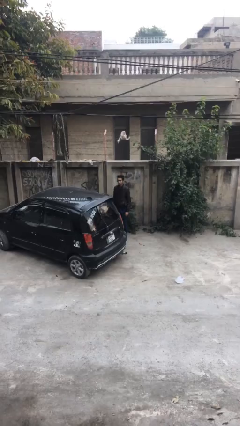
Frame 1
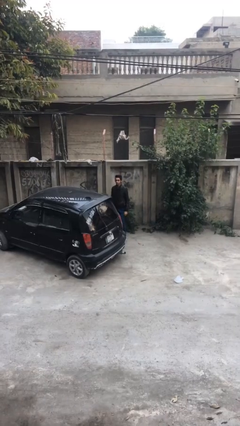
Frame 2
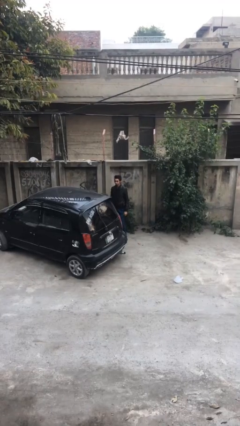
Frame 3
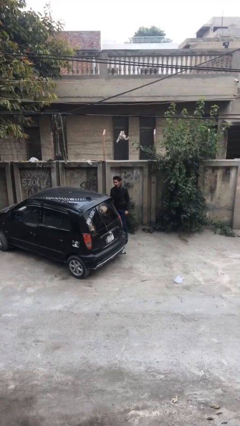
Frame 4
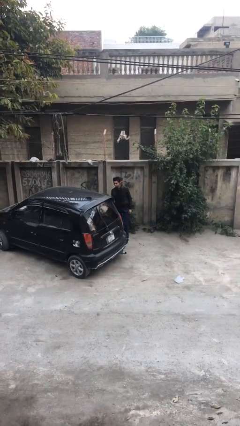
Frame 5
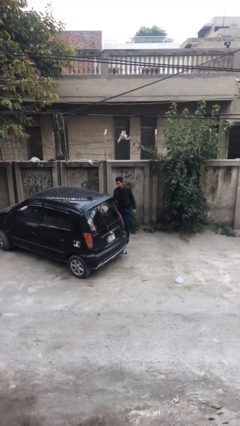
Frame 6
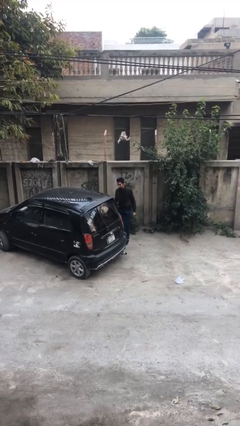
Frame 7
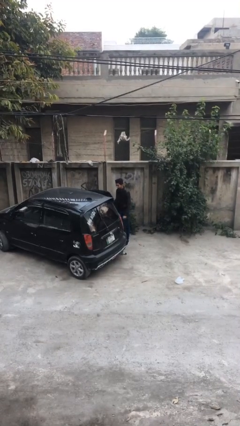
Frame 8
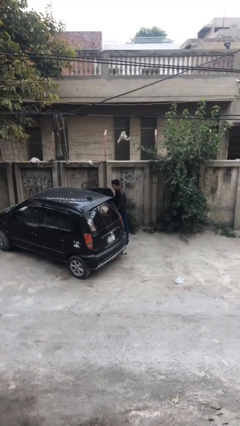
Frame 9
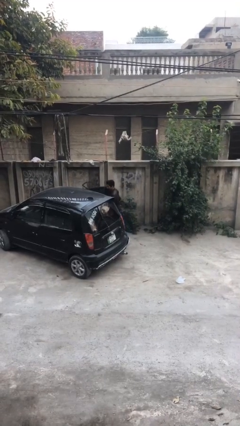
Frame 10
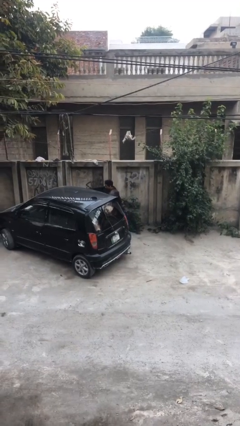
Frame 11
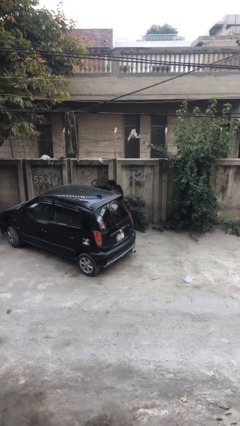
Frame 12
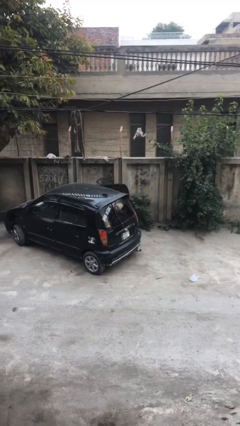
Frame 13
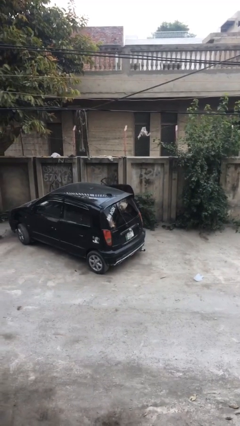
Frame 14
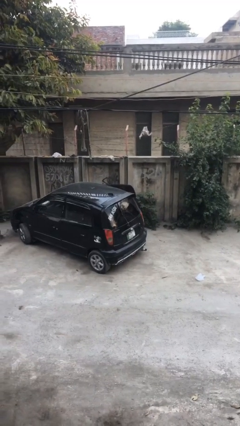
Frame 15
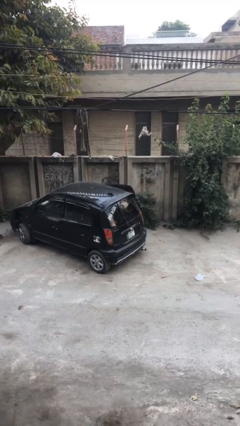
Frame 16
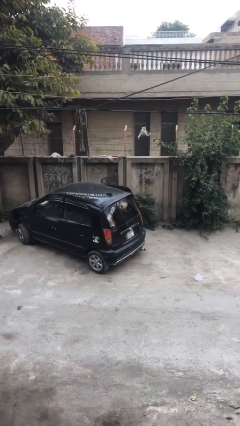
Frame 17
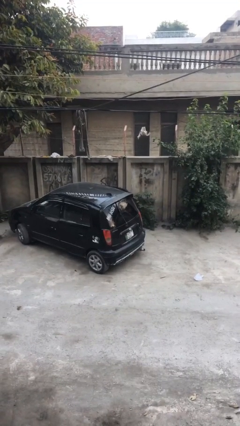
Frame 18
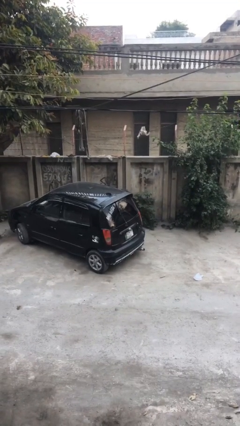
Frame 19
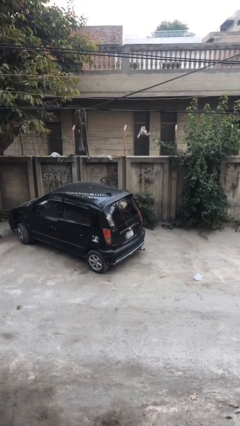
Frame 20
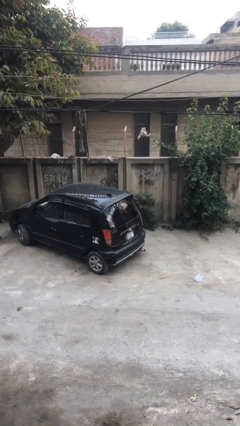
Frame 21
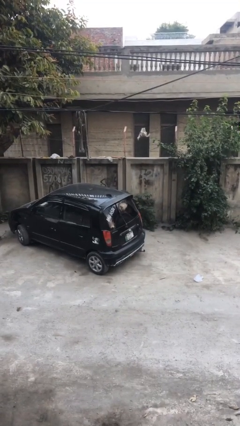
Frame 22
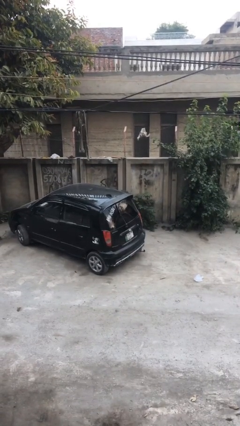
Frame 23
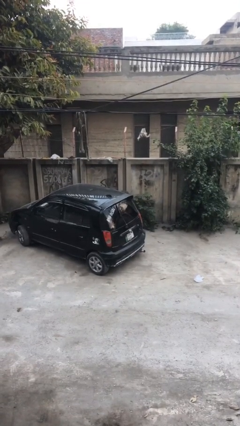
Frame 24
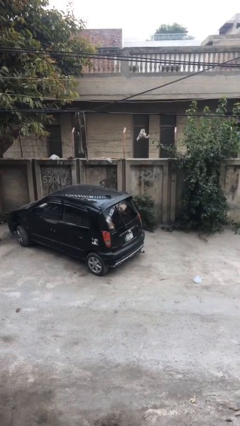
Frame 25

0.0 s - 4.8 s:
person enters car

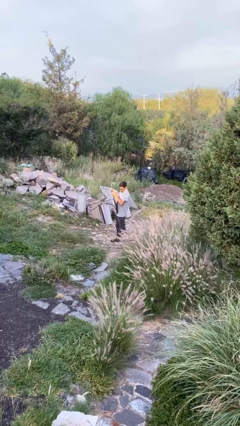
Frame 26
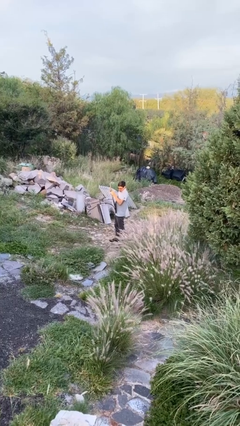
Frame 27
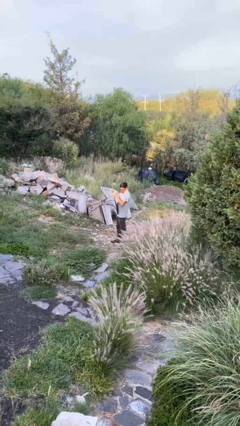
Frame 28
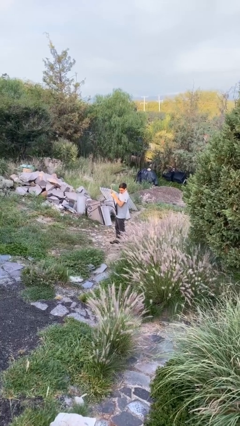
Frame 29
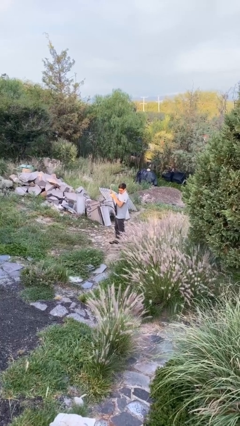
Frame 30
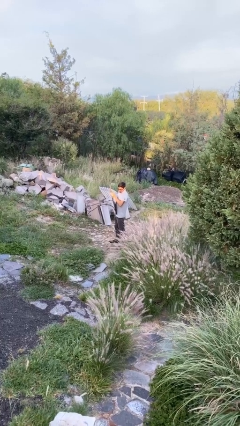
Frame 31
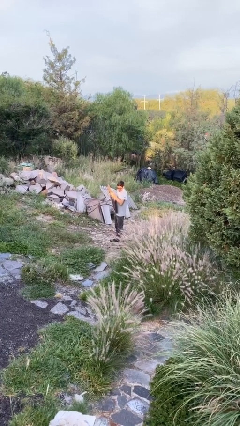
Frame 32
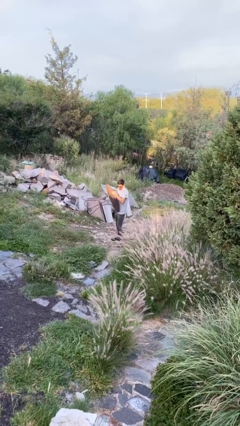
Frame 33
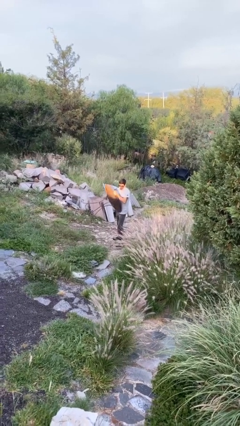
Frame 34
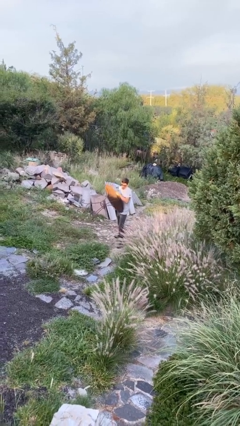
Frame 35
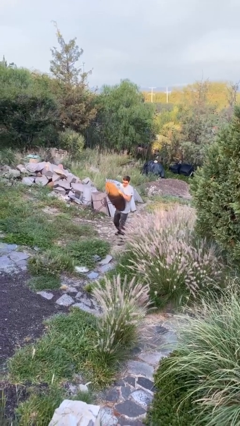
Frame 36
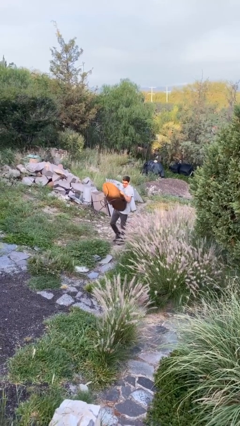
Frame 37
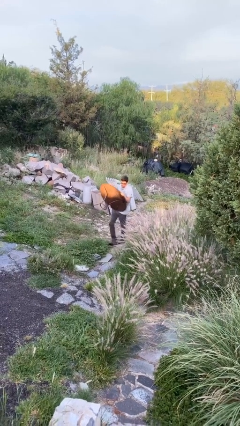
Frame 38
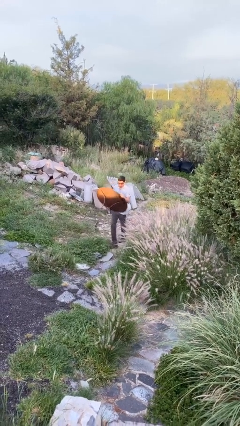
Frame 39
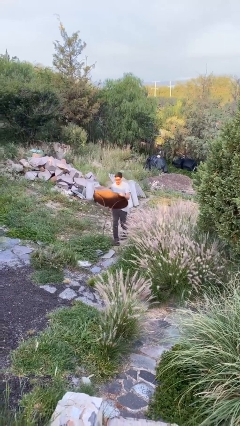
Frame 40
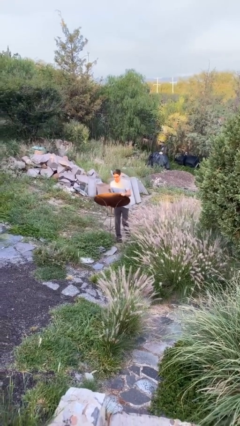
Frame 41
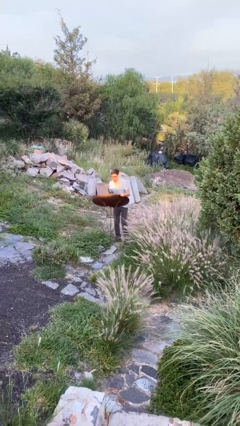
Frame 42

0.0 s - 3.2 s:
person carries heavy object

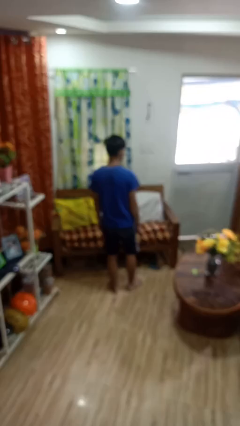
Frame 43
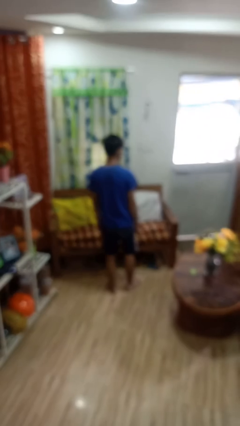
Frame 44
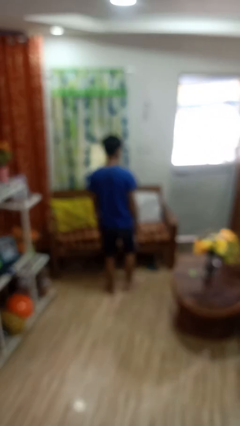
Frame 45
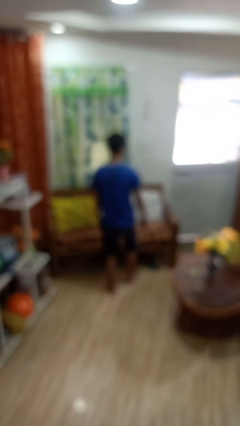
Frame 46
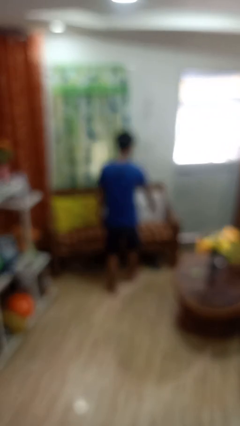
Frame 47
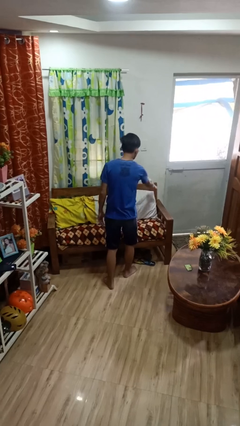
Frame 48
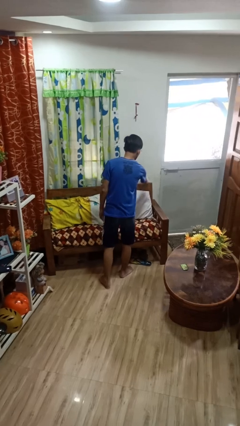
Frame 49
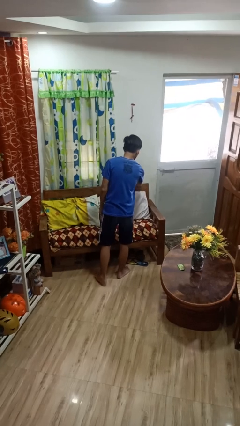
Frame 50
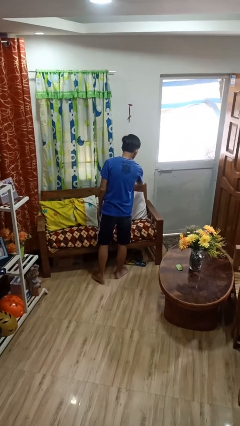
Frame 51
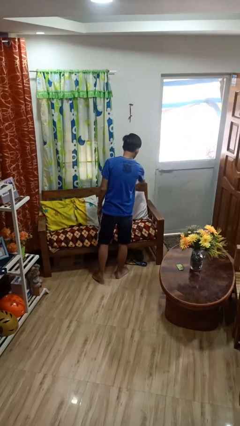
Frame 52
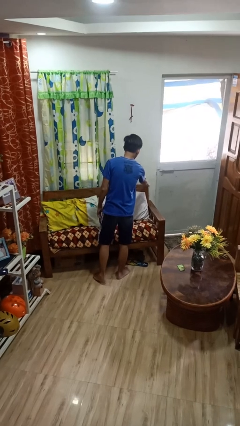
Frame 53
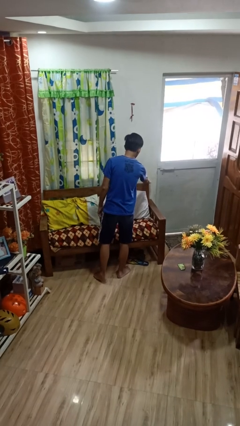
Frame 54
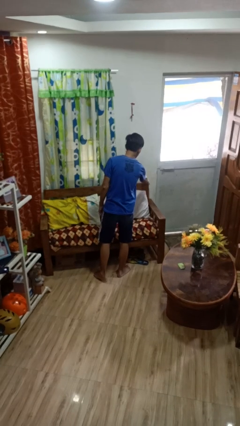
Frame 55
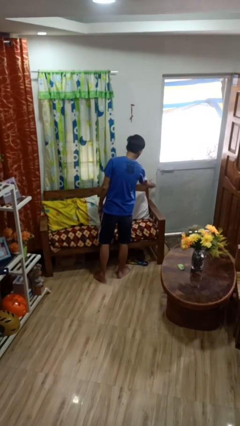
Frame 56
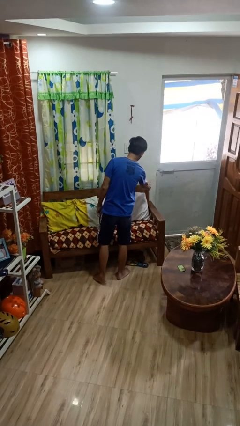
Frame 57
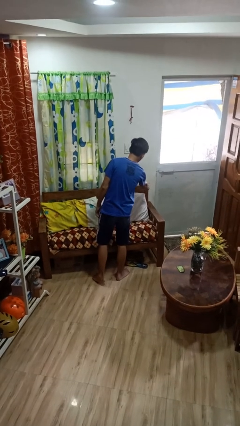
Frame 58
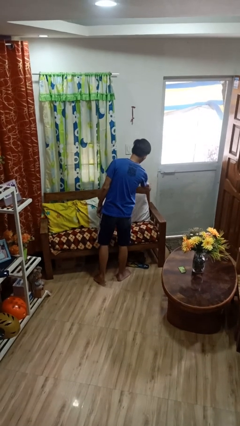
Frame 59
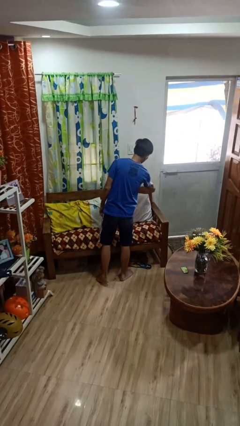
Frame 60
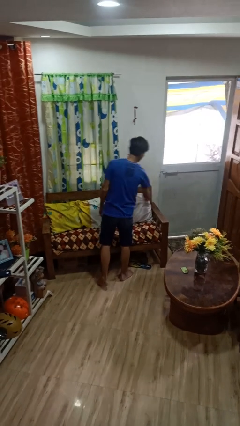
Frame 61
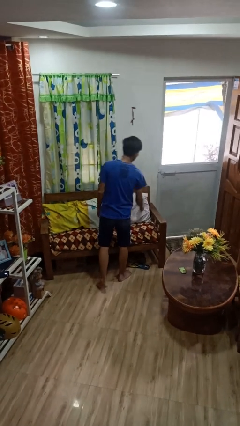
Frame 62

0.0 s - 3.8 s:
person taps object with finger

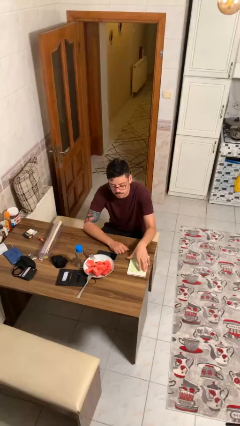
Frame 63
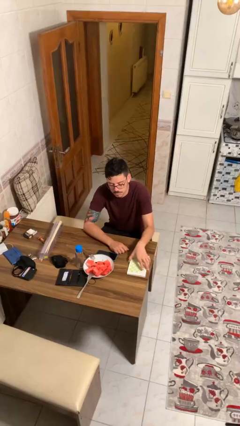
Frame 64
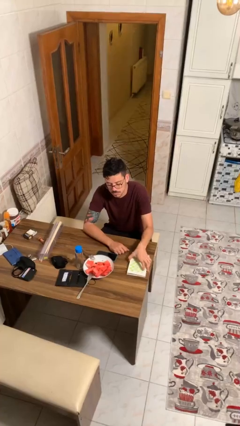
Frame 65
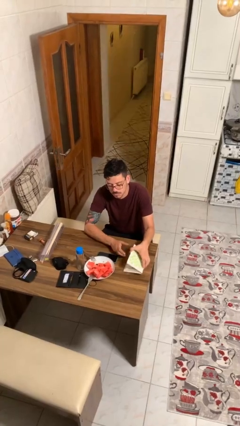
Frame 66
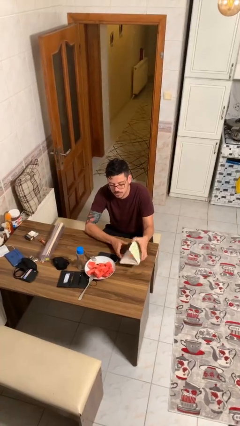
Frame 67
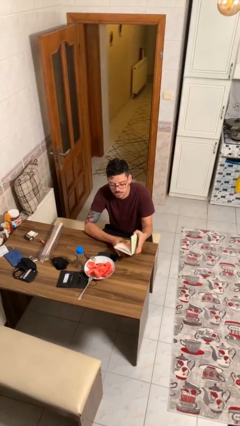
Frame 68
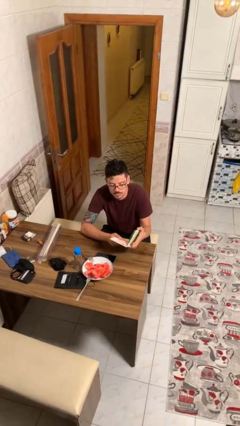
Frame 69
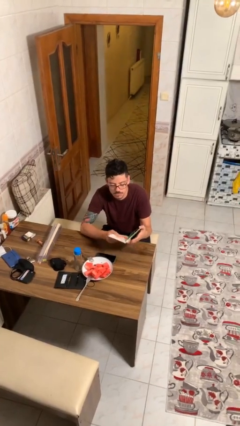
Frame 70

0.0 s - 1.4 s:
person picks up object from table

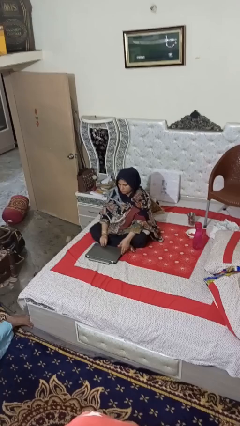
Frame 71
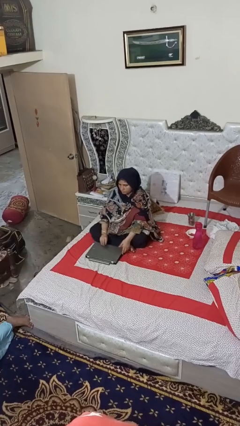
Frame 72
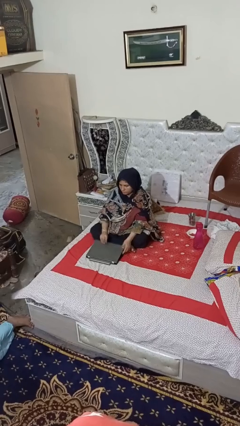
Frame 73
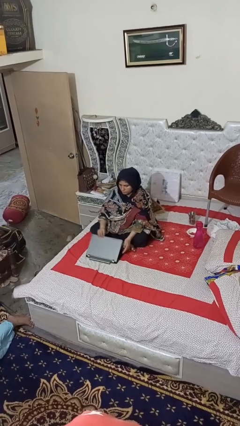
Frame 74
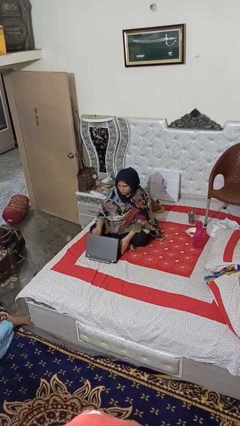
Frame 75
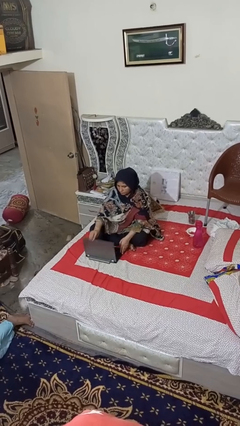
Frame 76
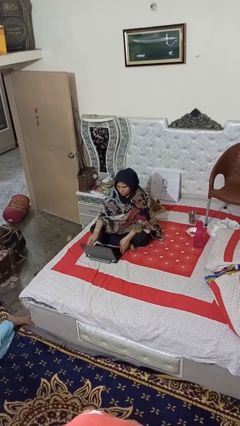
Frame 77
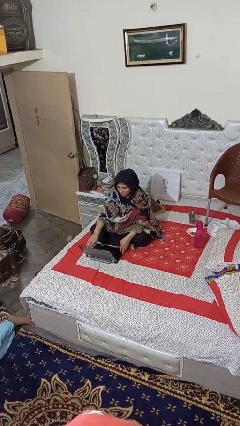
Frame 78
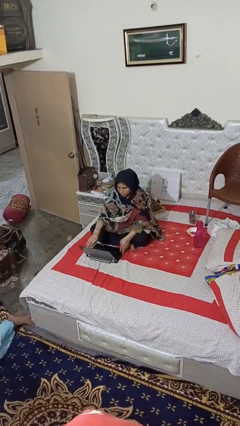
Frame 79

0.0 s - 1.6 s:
person opens laptop

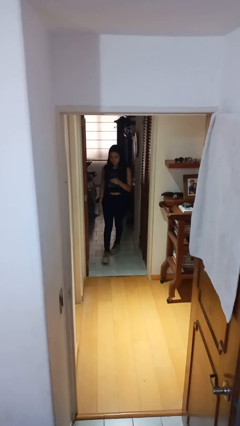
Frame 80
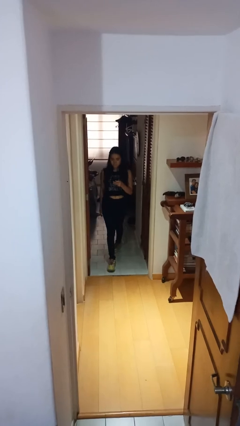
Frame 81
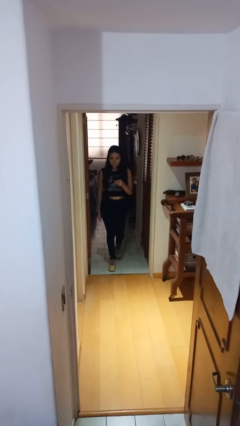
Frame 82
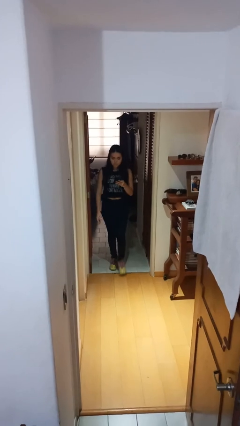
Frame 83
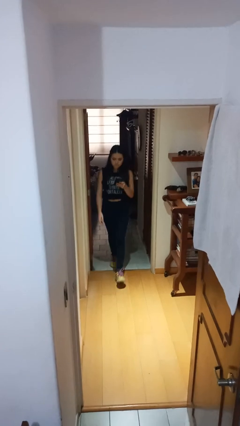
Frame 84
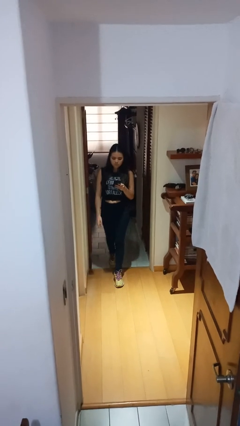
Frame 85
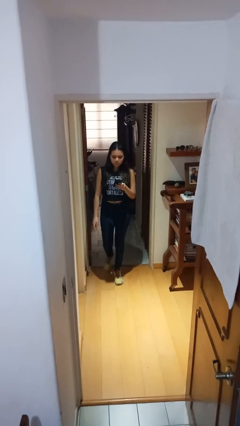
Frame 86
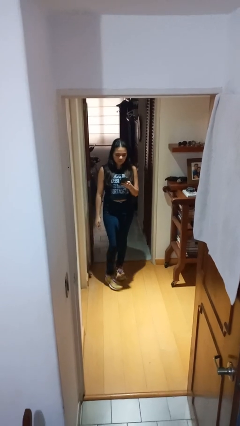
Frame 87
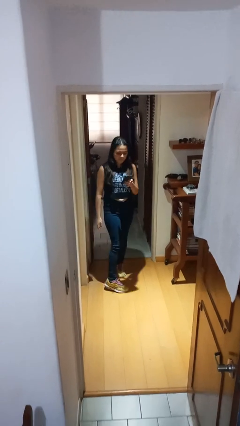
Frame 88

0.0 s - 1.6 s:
person enters scene through structure

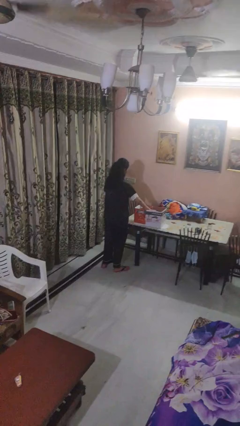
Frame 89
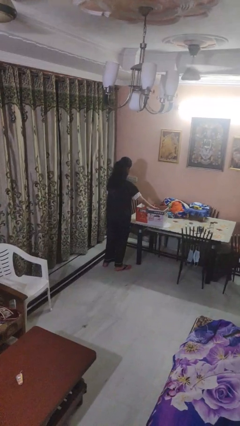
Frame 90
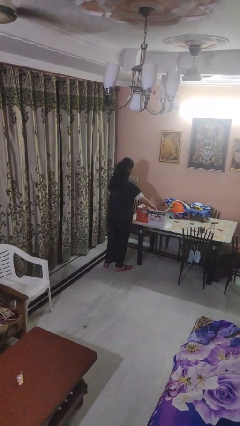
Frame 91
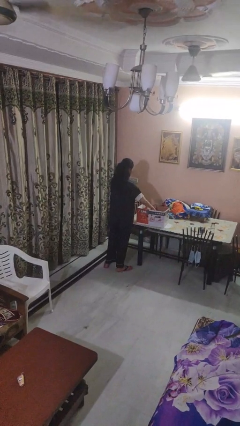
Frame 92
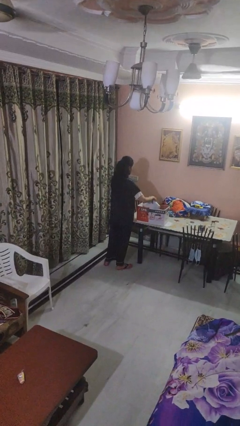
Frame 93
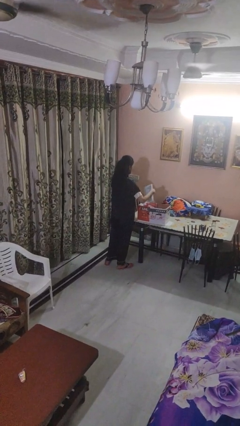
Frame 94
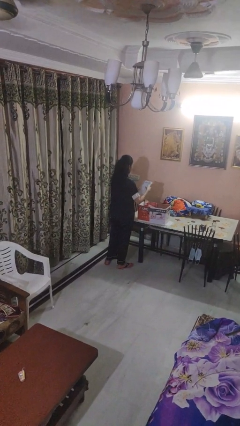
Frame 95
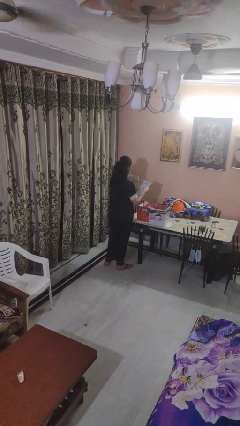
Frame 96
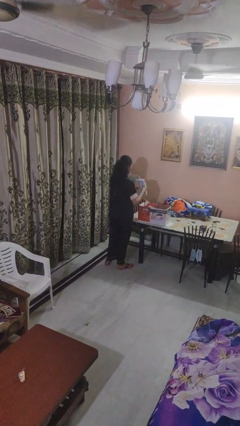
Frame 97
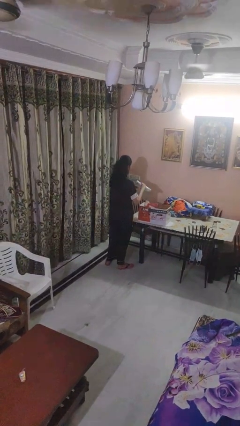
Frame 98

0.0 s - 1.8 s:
person takes object from box
